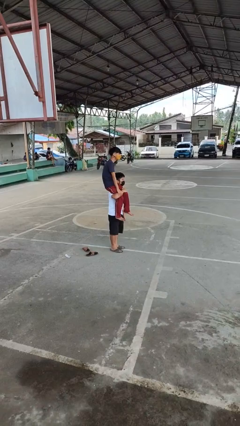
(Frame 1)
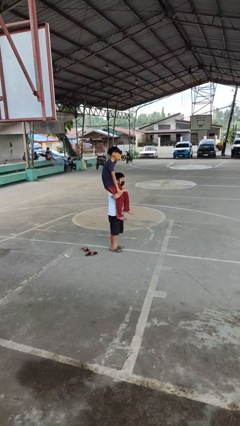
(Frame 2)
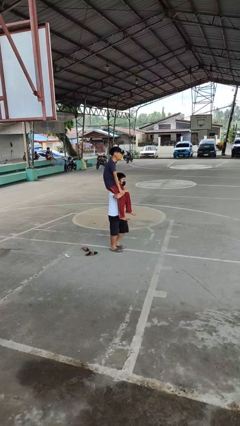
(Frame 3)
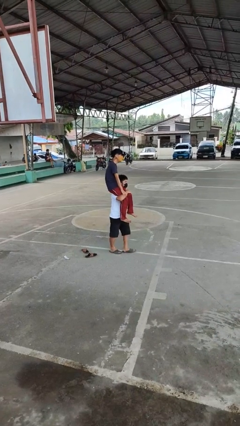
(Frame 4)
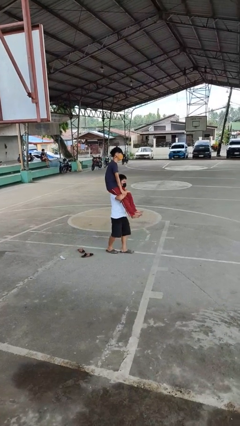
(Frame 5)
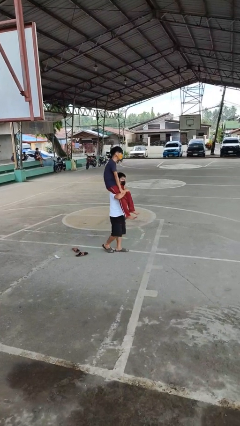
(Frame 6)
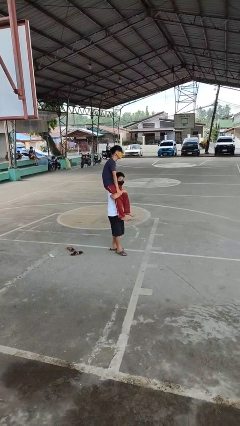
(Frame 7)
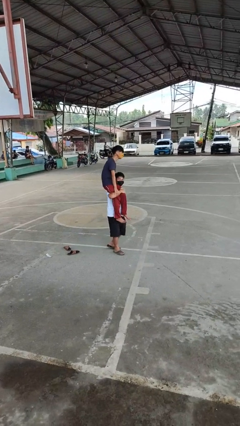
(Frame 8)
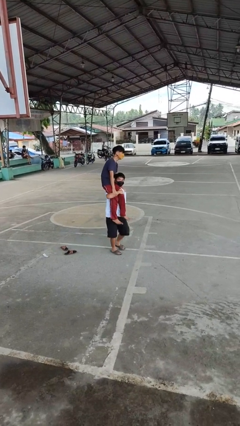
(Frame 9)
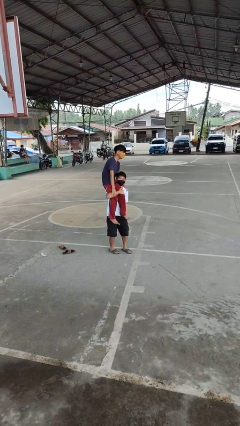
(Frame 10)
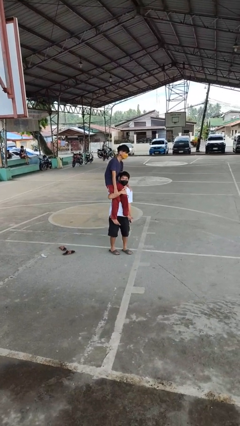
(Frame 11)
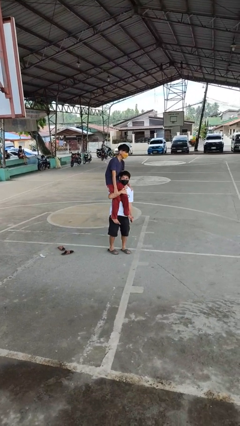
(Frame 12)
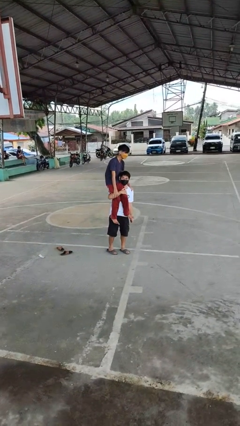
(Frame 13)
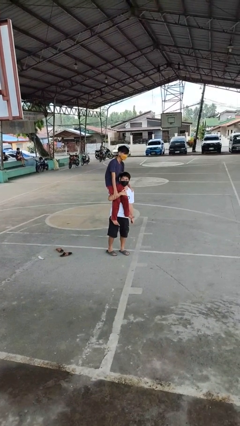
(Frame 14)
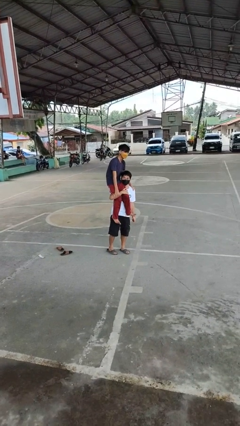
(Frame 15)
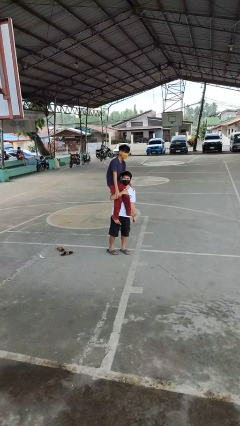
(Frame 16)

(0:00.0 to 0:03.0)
person carries person on shoulders

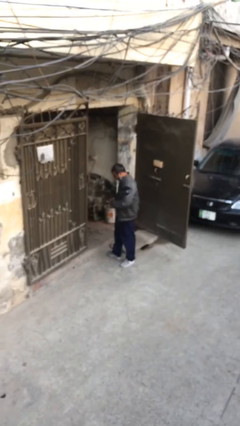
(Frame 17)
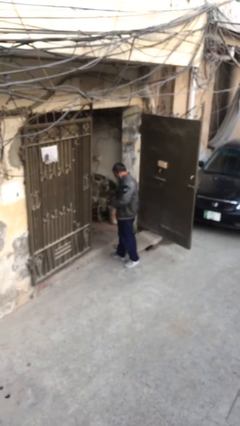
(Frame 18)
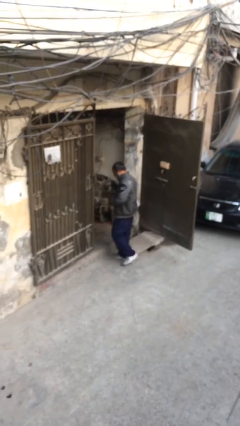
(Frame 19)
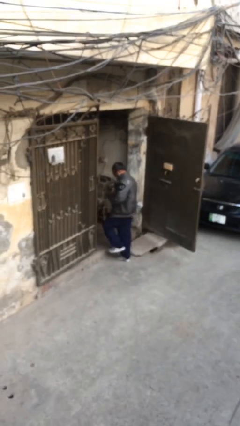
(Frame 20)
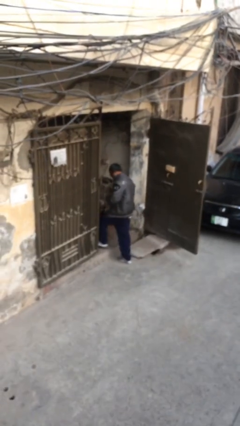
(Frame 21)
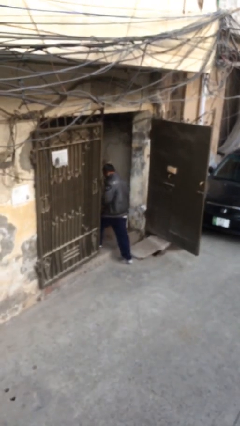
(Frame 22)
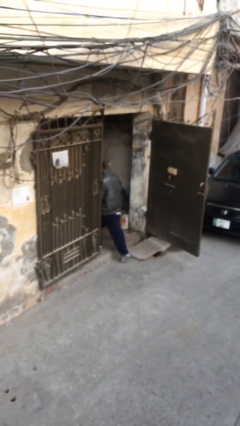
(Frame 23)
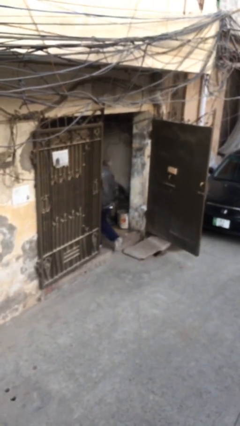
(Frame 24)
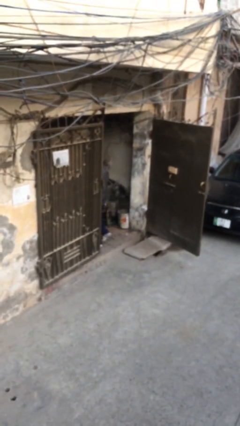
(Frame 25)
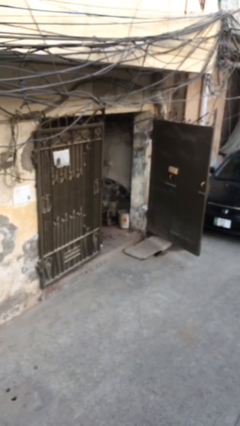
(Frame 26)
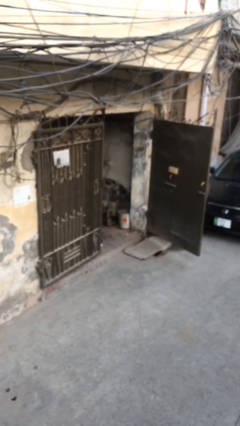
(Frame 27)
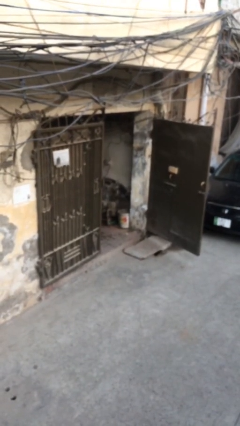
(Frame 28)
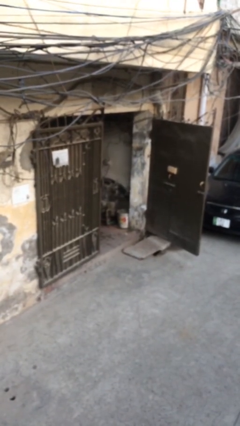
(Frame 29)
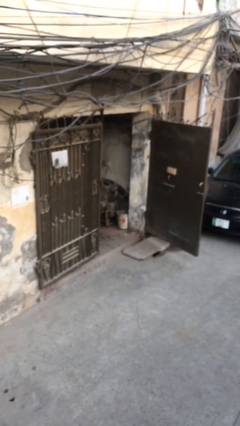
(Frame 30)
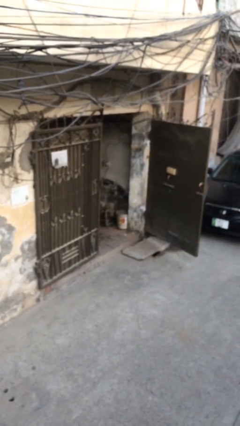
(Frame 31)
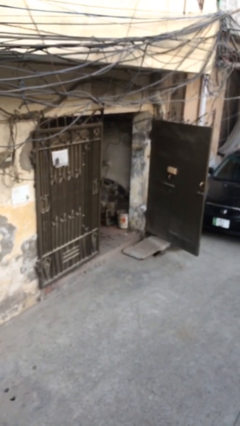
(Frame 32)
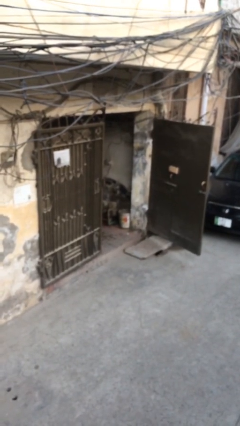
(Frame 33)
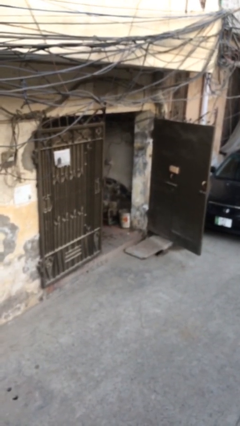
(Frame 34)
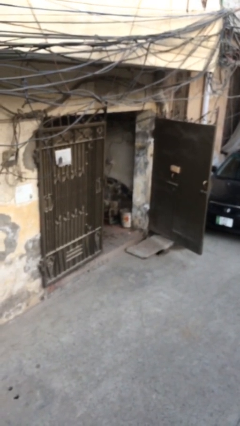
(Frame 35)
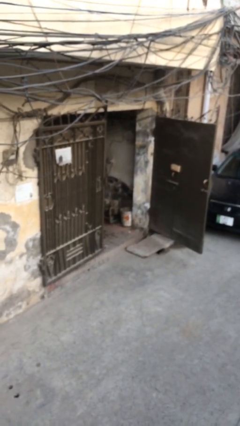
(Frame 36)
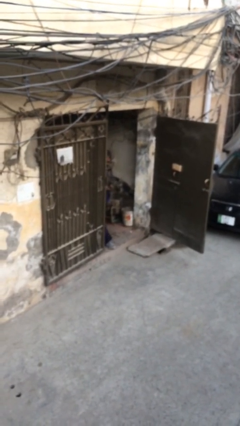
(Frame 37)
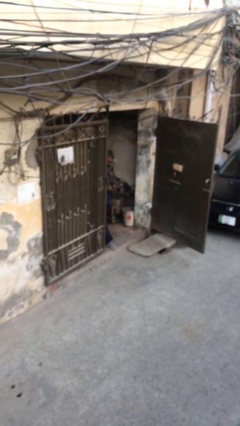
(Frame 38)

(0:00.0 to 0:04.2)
person exits scene through structure

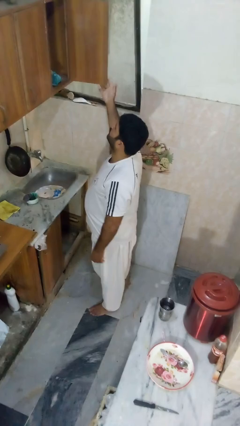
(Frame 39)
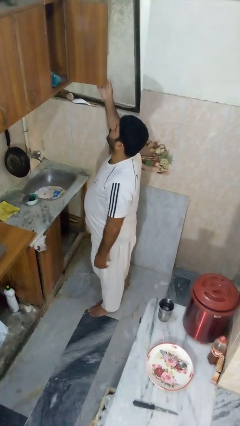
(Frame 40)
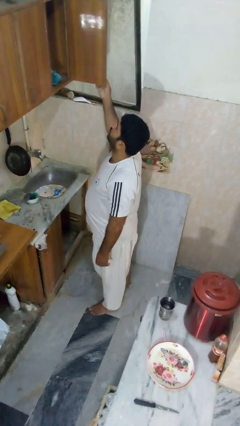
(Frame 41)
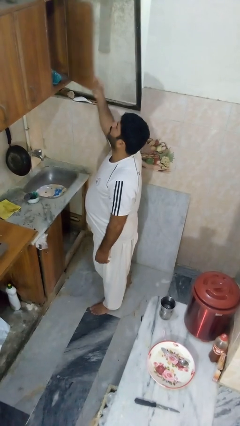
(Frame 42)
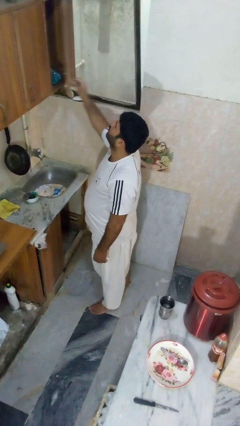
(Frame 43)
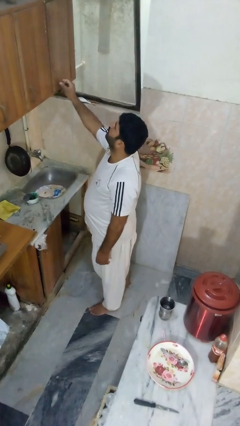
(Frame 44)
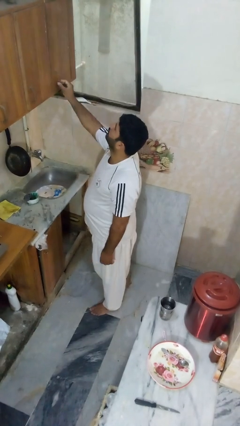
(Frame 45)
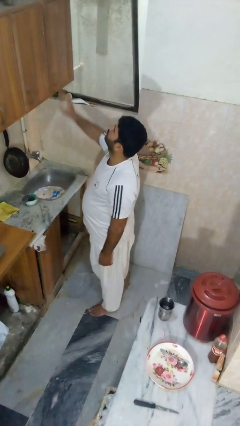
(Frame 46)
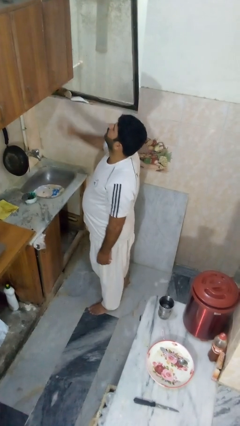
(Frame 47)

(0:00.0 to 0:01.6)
person closes cabinet

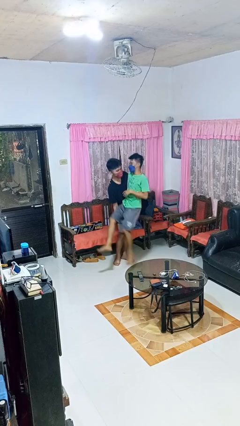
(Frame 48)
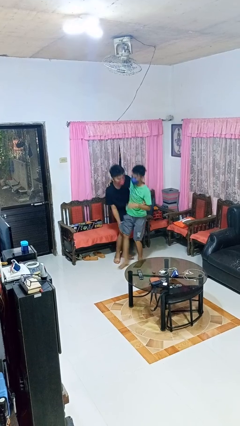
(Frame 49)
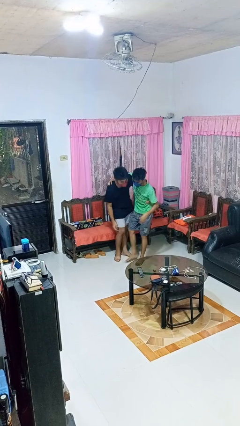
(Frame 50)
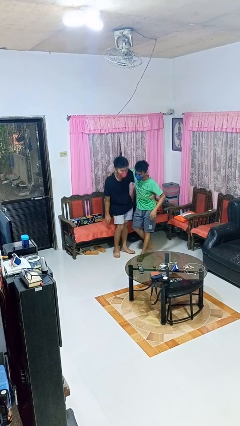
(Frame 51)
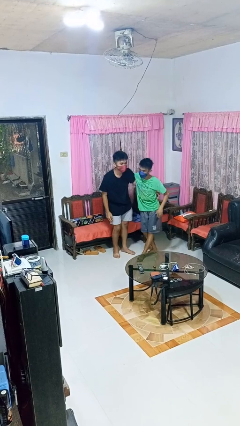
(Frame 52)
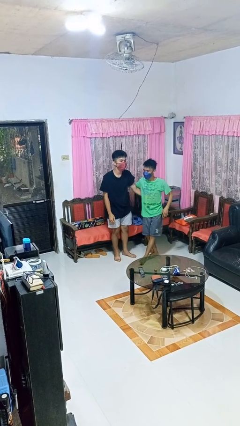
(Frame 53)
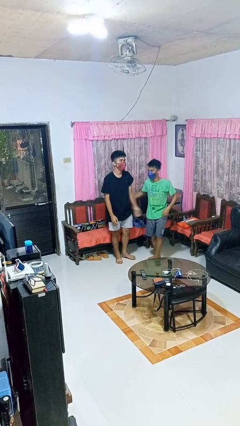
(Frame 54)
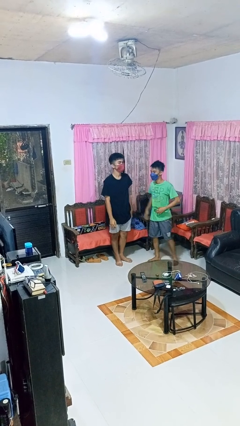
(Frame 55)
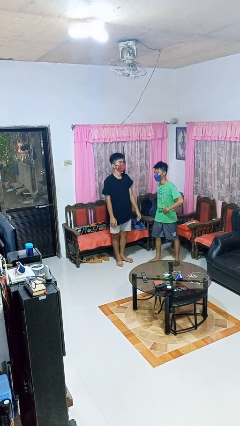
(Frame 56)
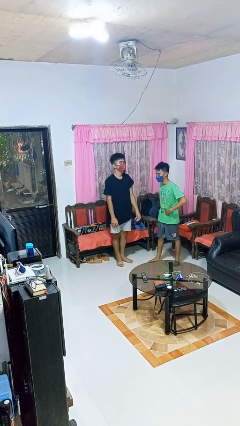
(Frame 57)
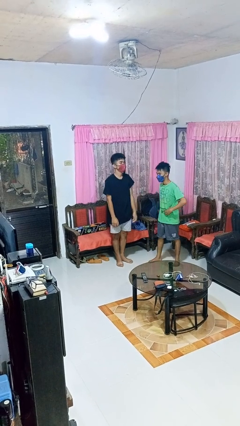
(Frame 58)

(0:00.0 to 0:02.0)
person puts down person

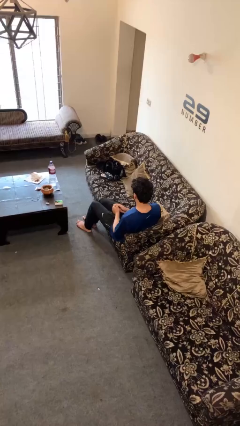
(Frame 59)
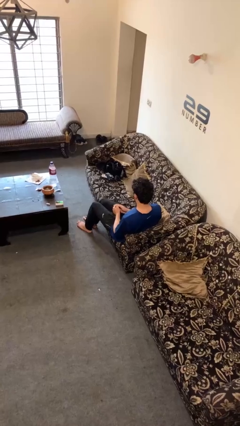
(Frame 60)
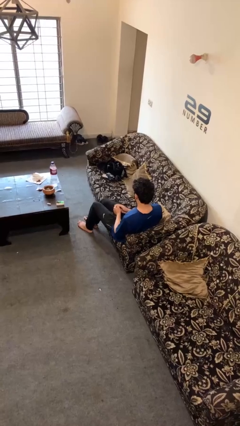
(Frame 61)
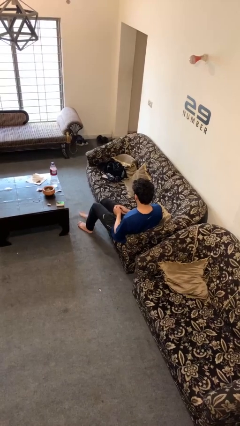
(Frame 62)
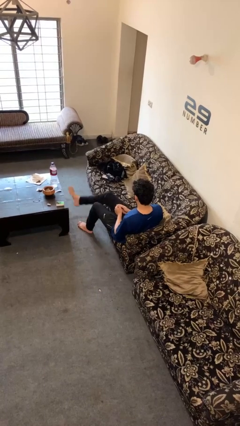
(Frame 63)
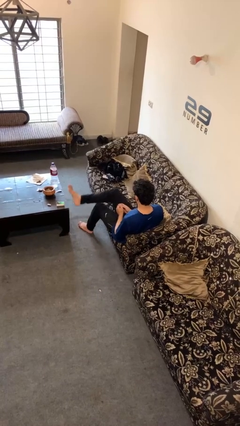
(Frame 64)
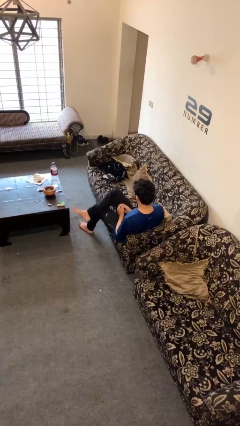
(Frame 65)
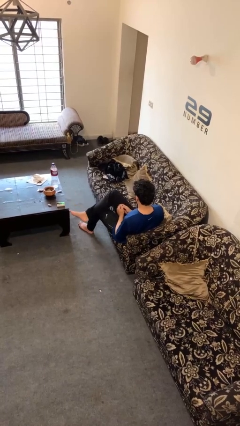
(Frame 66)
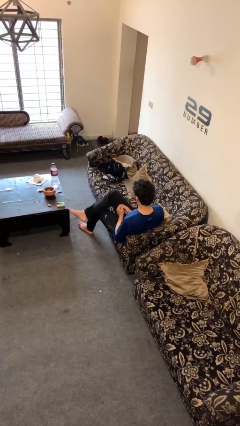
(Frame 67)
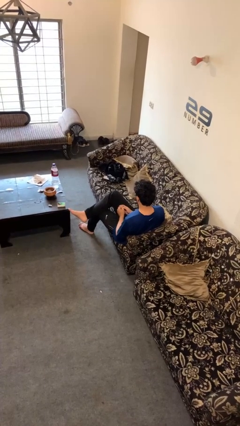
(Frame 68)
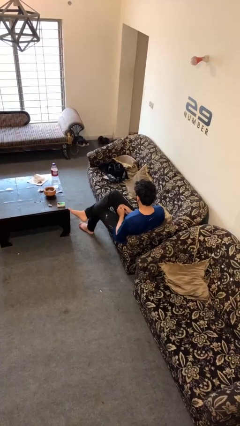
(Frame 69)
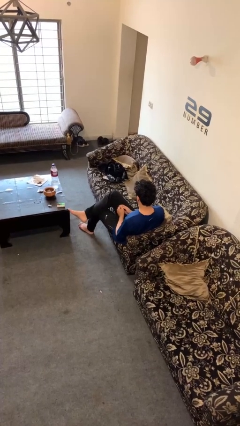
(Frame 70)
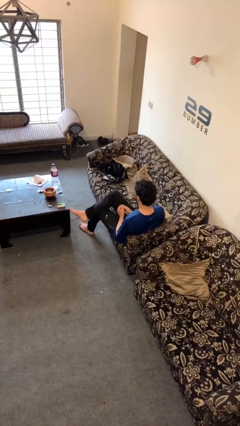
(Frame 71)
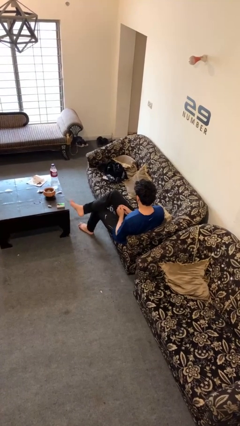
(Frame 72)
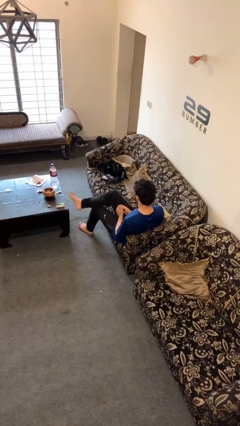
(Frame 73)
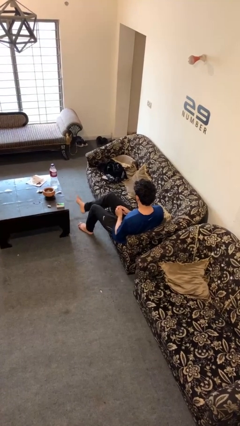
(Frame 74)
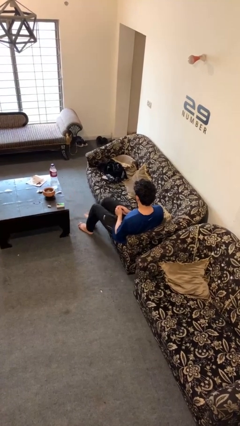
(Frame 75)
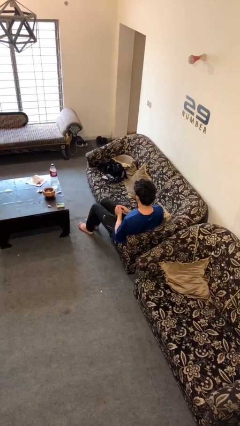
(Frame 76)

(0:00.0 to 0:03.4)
person crosses legs

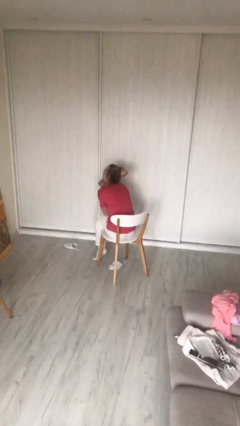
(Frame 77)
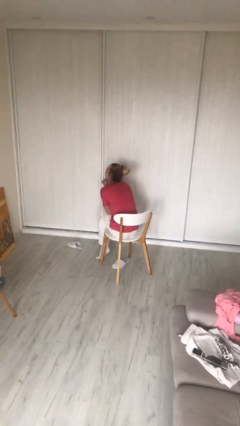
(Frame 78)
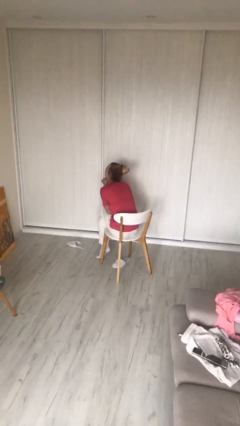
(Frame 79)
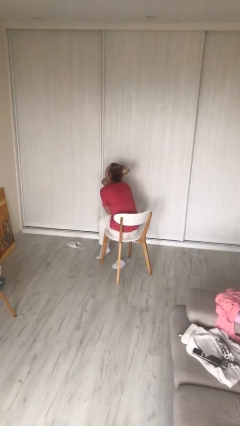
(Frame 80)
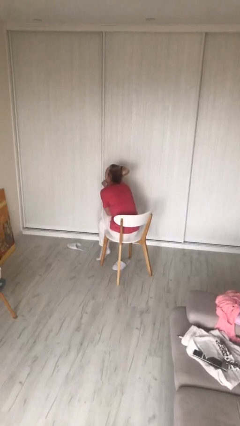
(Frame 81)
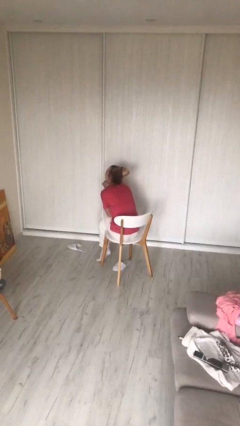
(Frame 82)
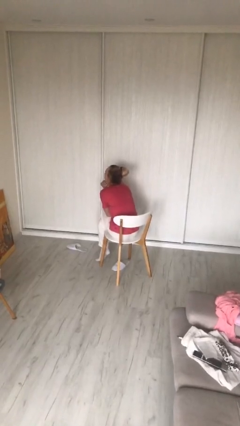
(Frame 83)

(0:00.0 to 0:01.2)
person strokes chin

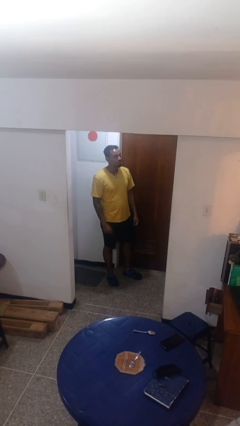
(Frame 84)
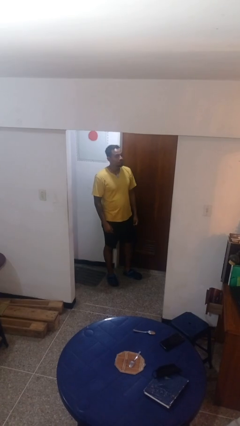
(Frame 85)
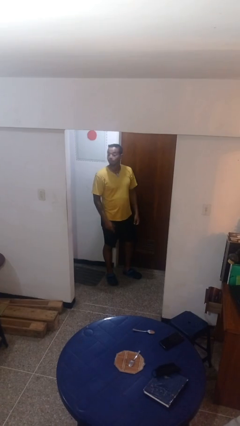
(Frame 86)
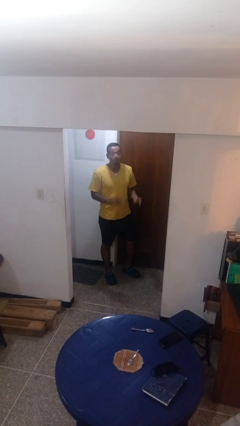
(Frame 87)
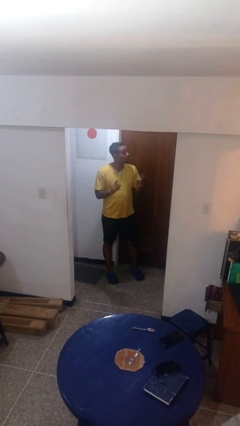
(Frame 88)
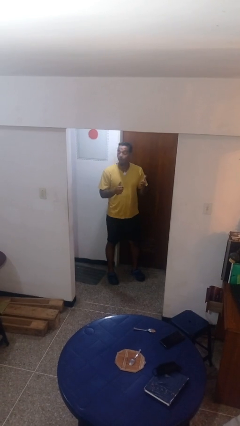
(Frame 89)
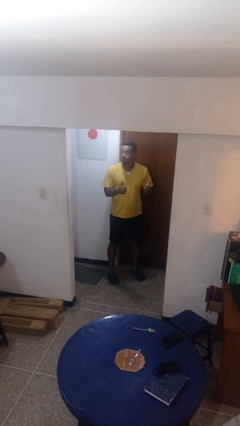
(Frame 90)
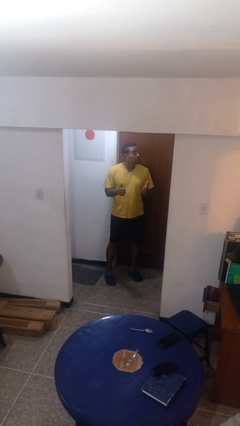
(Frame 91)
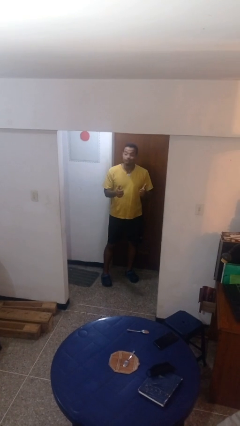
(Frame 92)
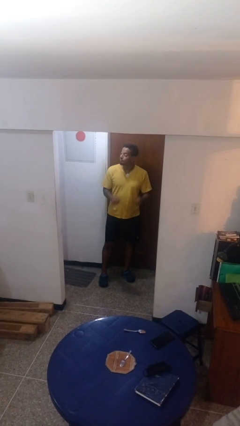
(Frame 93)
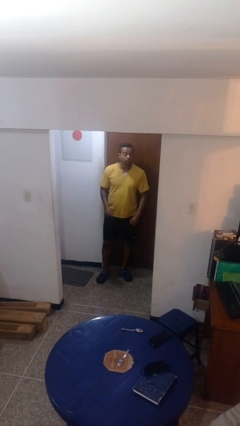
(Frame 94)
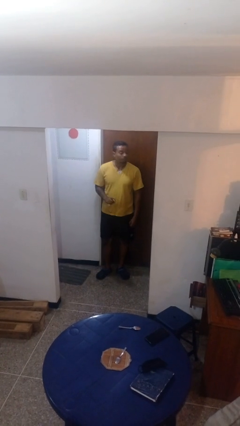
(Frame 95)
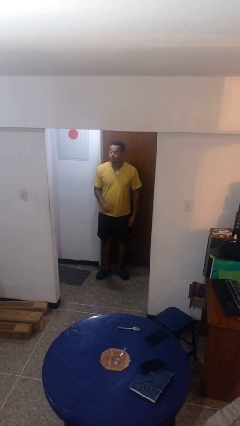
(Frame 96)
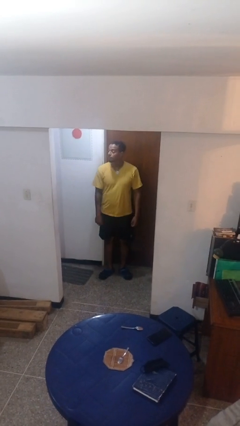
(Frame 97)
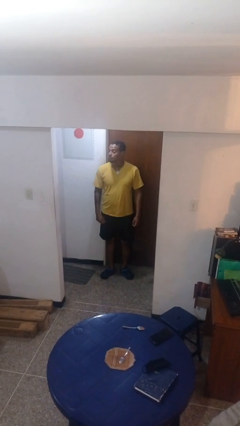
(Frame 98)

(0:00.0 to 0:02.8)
person shakes head
